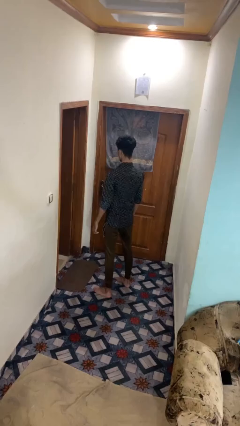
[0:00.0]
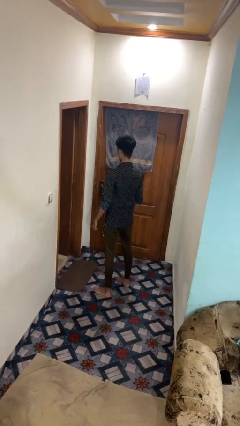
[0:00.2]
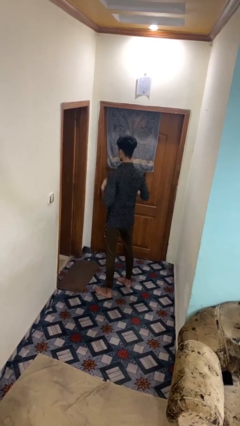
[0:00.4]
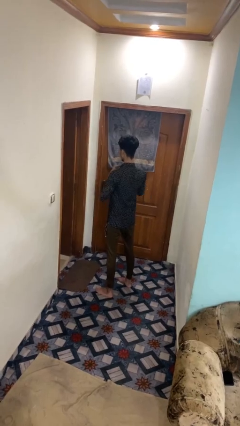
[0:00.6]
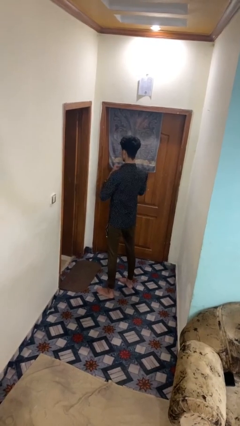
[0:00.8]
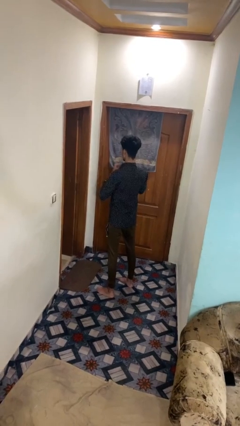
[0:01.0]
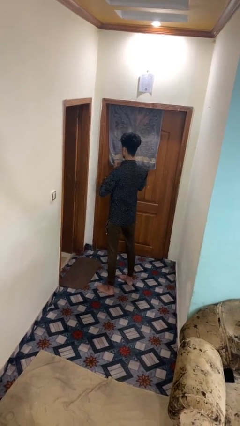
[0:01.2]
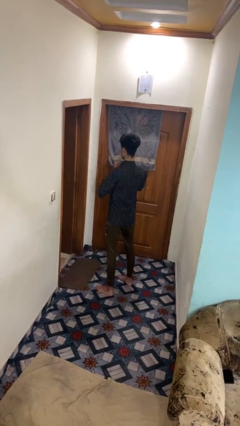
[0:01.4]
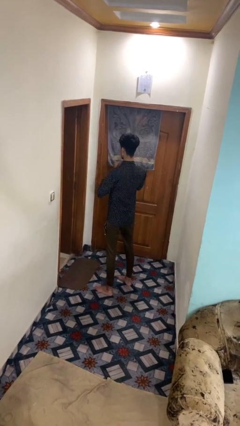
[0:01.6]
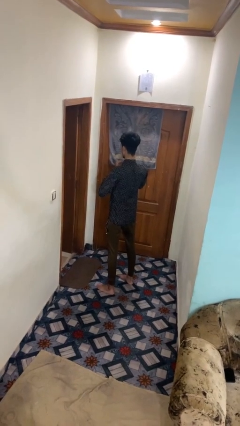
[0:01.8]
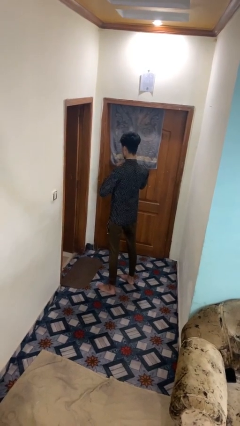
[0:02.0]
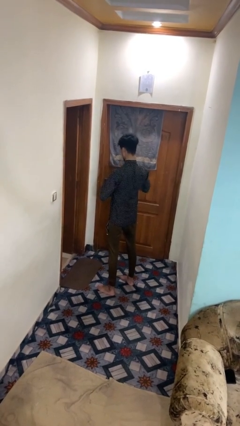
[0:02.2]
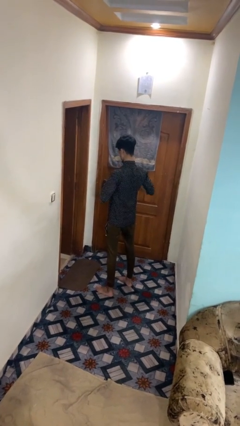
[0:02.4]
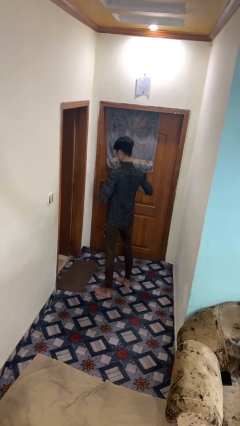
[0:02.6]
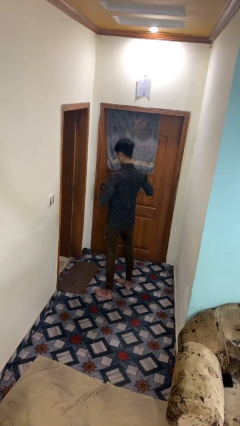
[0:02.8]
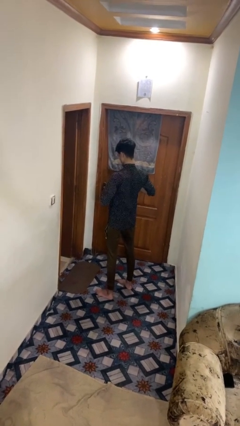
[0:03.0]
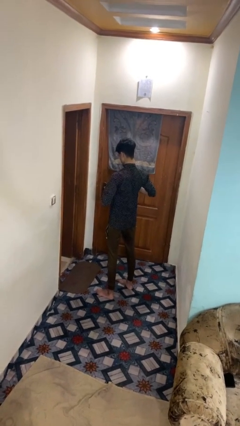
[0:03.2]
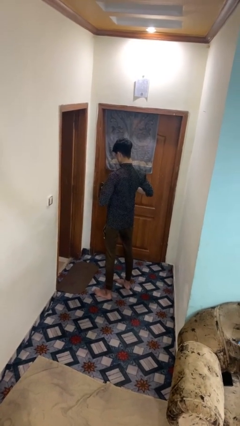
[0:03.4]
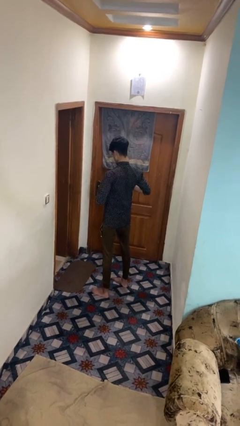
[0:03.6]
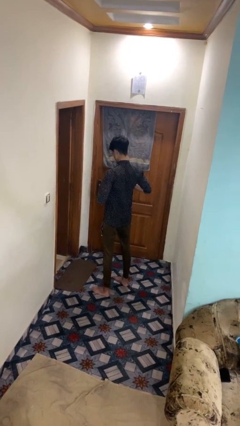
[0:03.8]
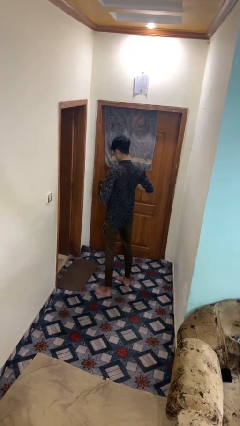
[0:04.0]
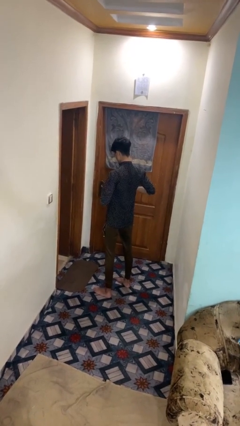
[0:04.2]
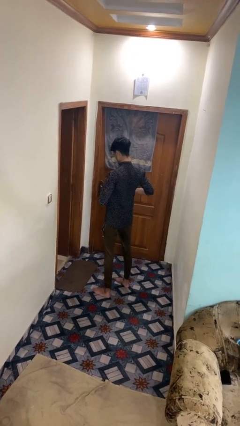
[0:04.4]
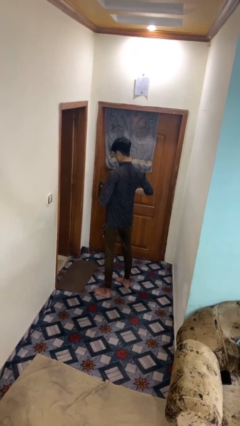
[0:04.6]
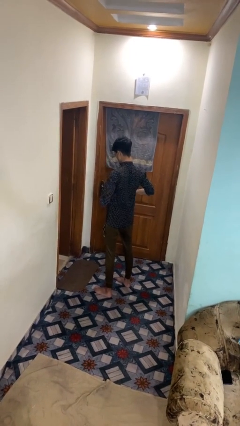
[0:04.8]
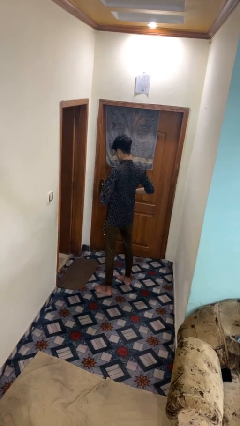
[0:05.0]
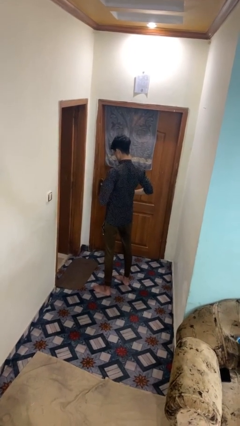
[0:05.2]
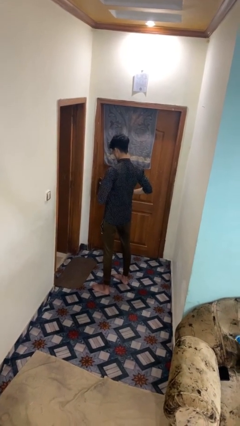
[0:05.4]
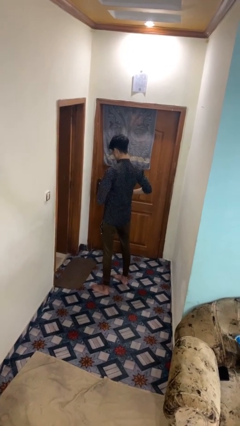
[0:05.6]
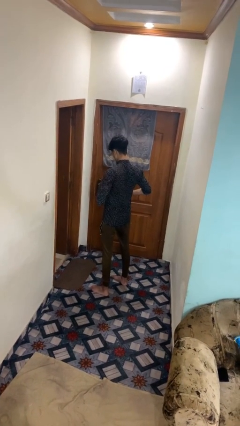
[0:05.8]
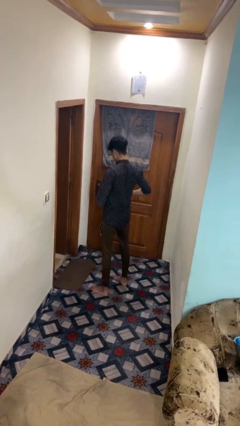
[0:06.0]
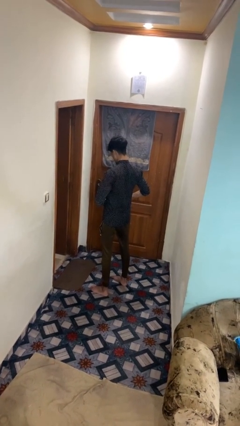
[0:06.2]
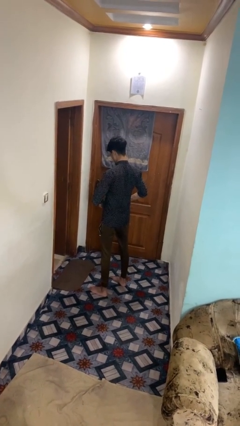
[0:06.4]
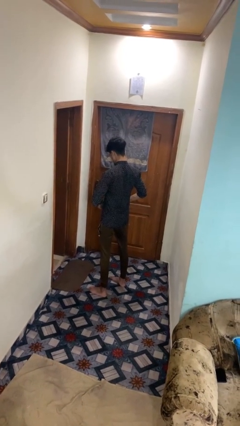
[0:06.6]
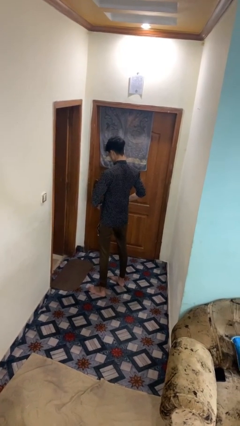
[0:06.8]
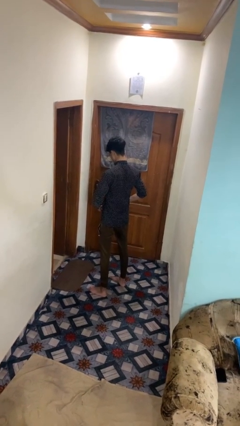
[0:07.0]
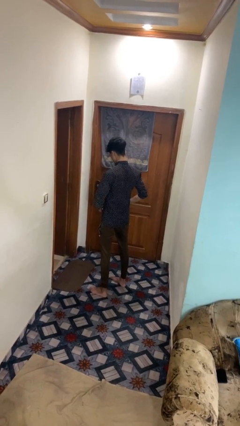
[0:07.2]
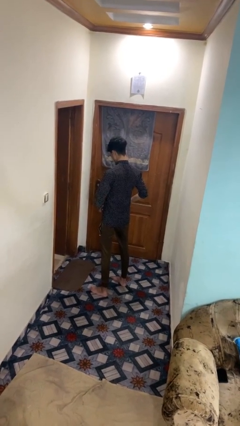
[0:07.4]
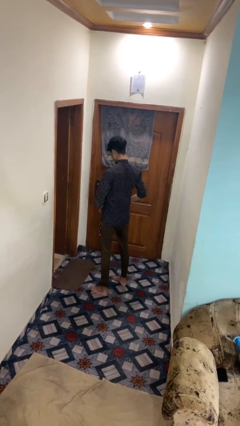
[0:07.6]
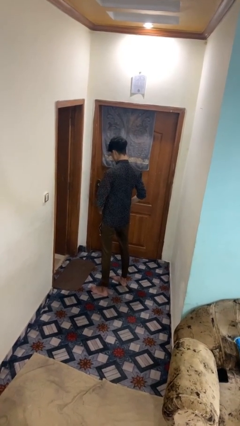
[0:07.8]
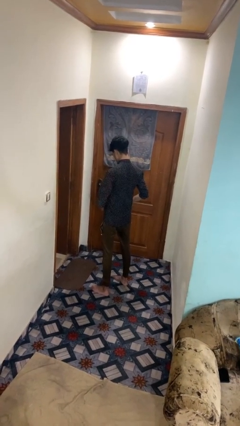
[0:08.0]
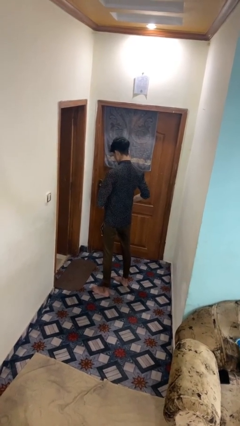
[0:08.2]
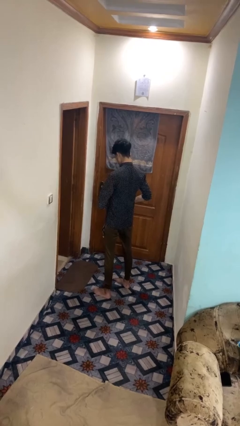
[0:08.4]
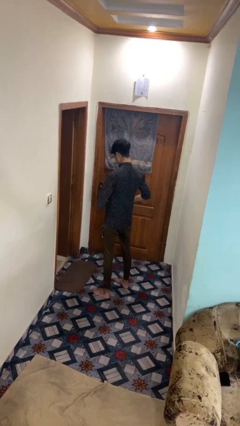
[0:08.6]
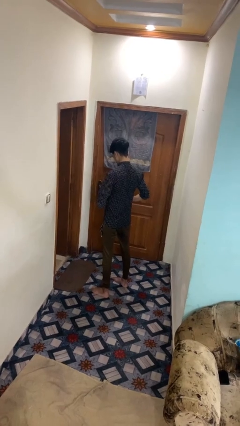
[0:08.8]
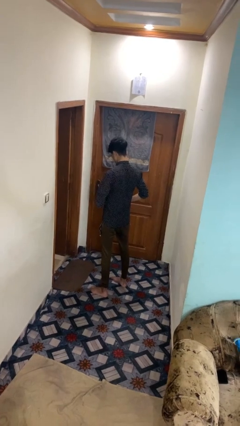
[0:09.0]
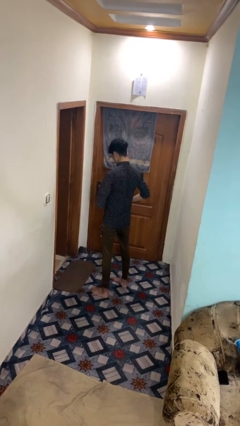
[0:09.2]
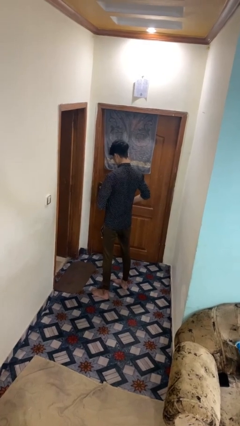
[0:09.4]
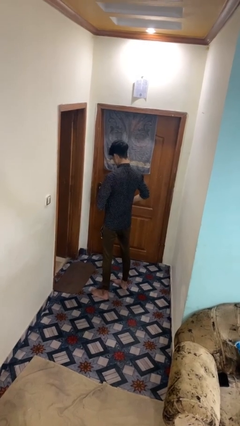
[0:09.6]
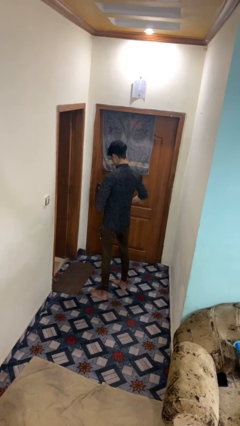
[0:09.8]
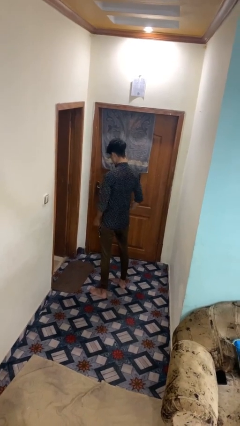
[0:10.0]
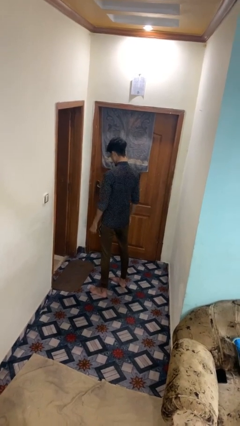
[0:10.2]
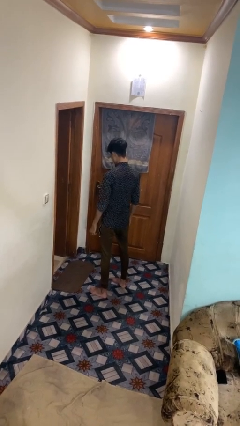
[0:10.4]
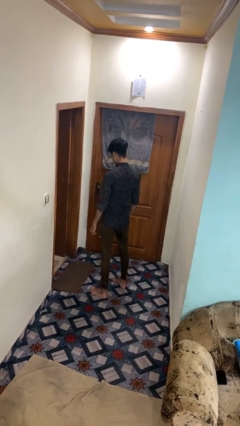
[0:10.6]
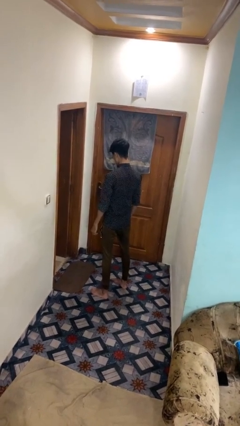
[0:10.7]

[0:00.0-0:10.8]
person buttons shirt

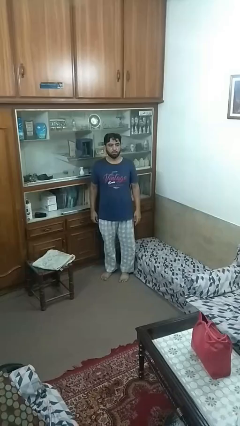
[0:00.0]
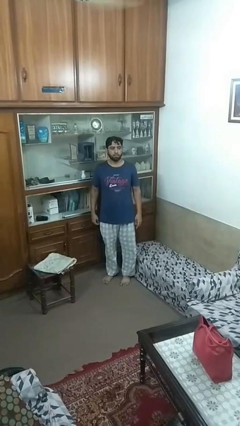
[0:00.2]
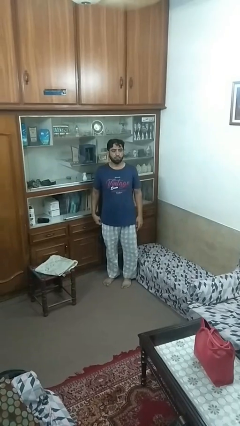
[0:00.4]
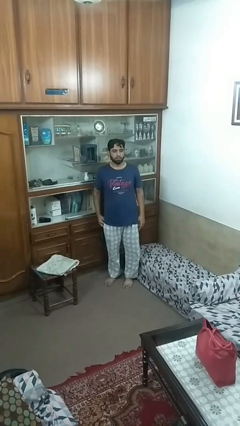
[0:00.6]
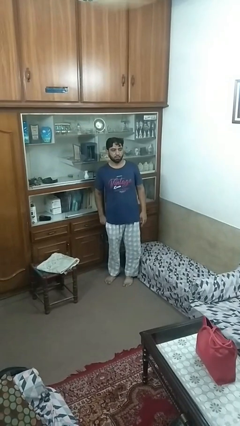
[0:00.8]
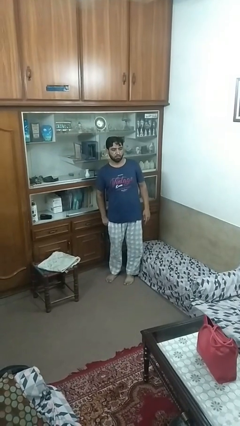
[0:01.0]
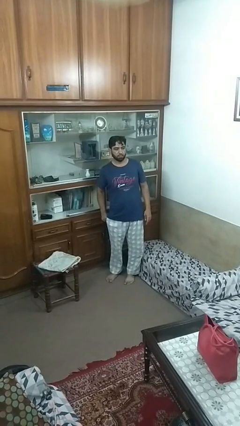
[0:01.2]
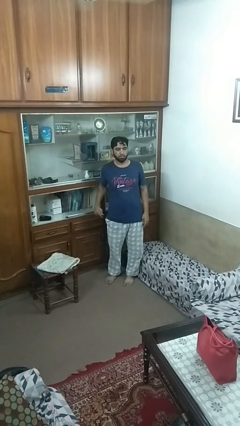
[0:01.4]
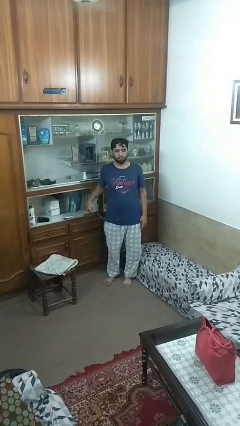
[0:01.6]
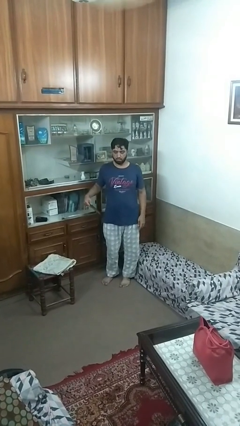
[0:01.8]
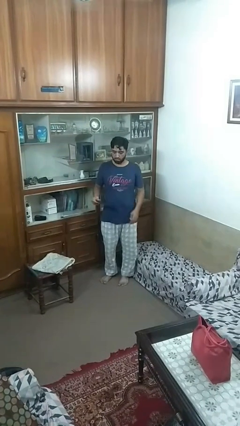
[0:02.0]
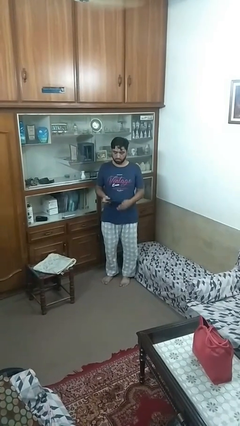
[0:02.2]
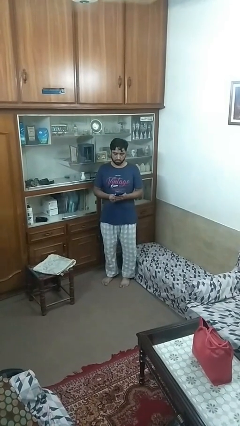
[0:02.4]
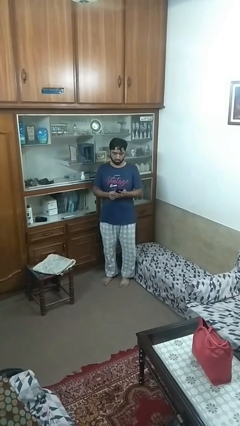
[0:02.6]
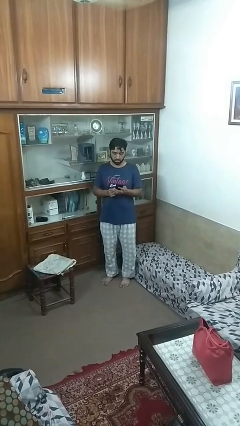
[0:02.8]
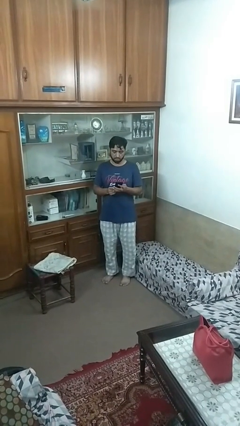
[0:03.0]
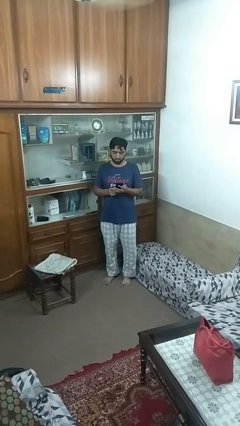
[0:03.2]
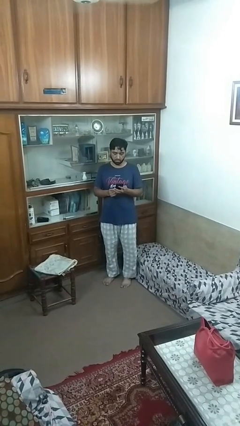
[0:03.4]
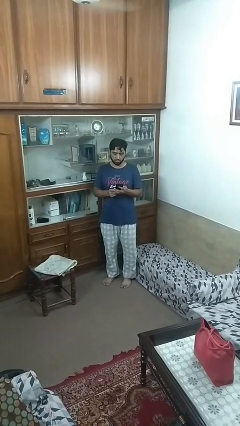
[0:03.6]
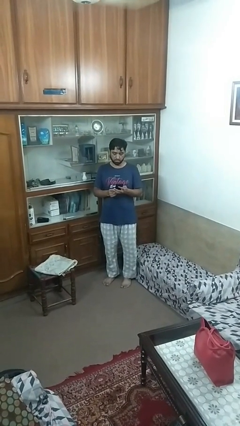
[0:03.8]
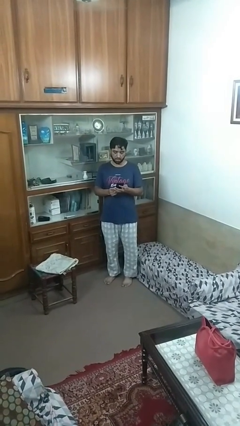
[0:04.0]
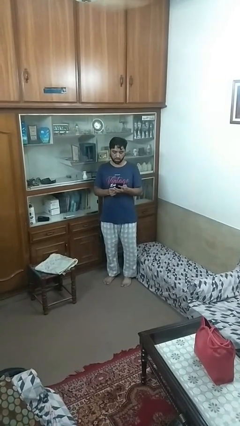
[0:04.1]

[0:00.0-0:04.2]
person takes phone from pocket

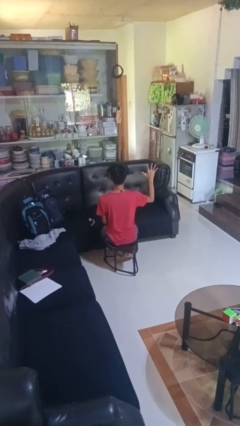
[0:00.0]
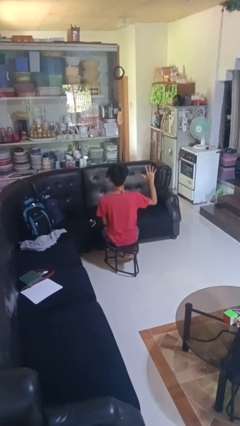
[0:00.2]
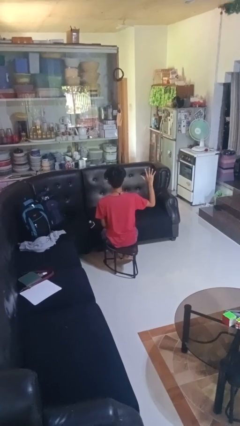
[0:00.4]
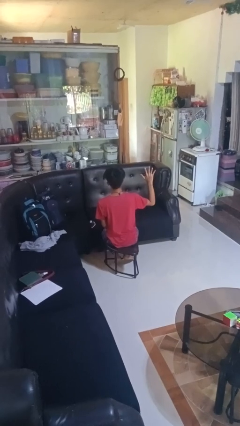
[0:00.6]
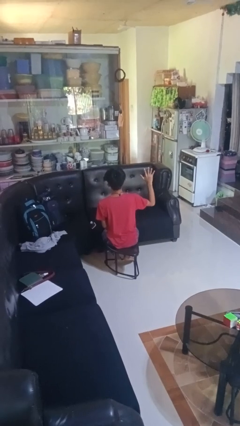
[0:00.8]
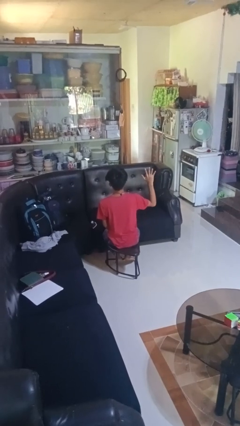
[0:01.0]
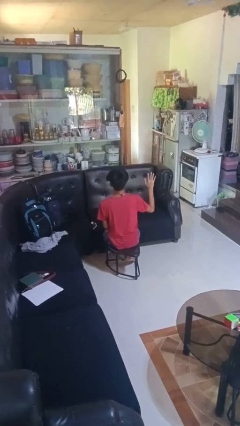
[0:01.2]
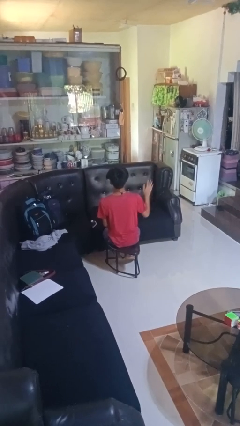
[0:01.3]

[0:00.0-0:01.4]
person gestures number five

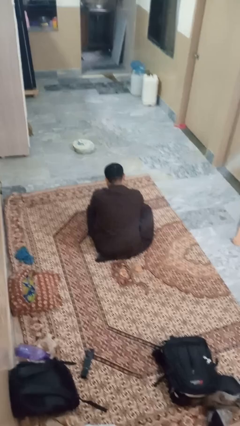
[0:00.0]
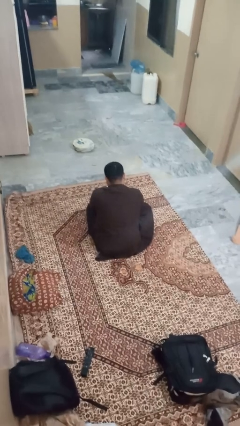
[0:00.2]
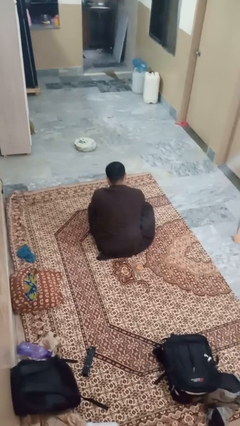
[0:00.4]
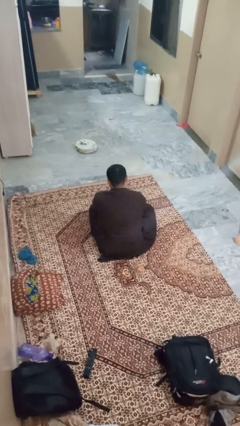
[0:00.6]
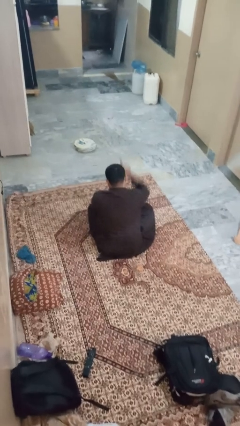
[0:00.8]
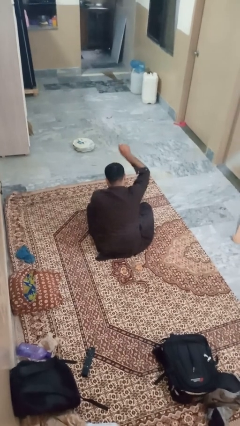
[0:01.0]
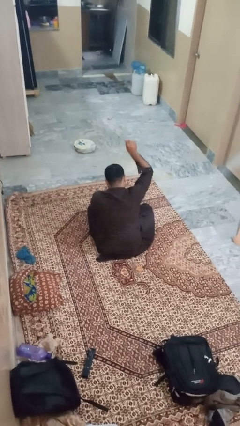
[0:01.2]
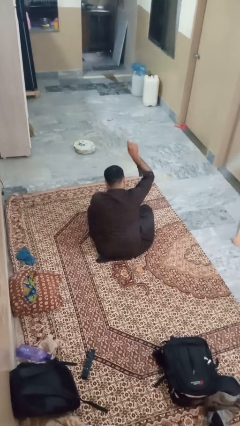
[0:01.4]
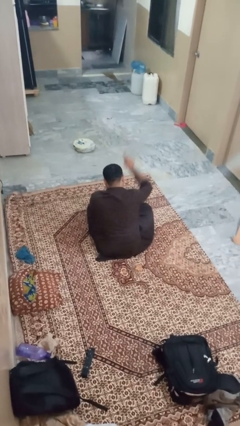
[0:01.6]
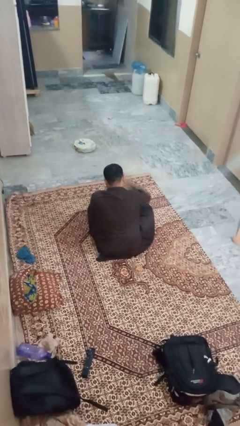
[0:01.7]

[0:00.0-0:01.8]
person gestures number one
